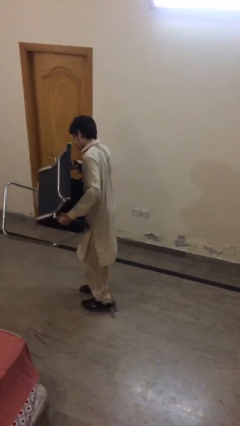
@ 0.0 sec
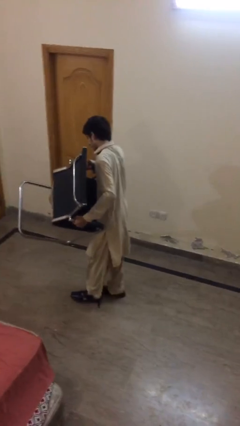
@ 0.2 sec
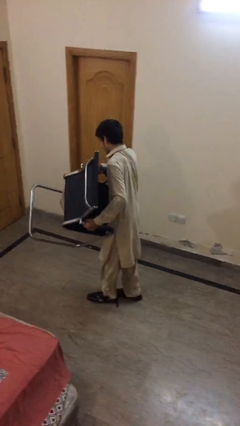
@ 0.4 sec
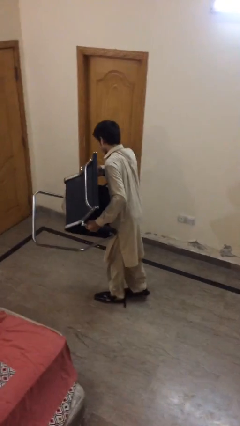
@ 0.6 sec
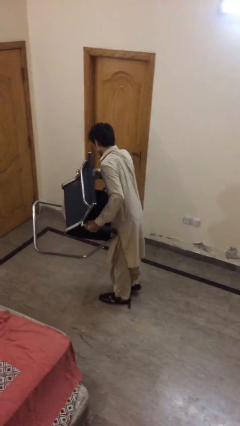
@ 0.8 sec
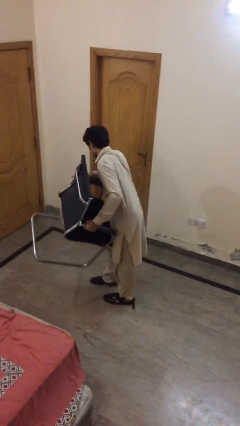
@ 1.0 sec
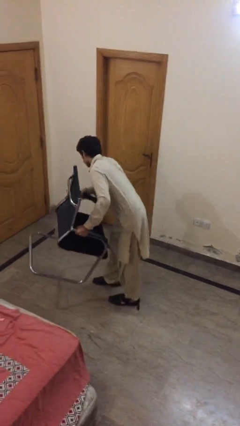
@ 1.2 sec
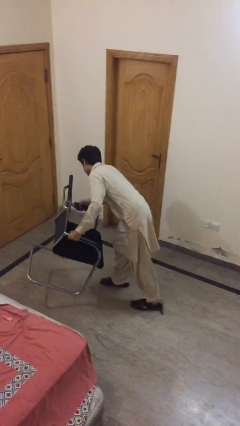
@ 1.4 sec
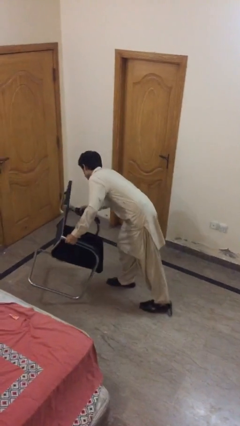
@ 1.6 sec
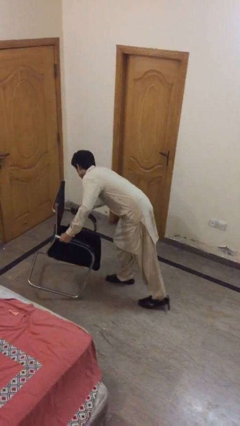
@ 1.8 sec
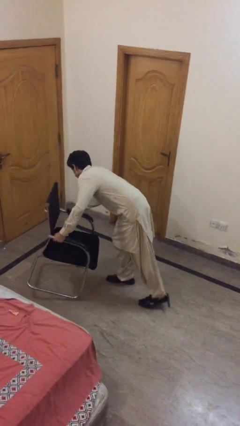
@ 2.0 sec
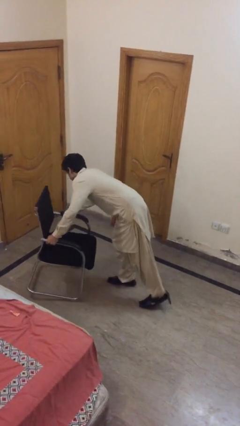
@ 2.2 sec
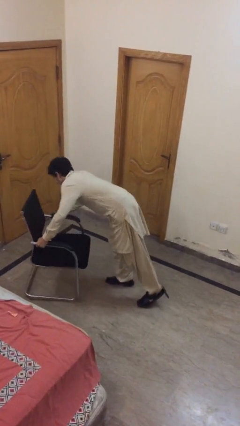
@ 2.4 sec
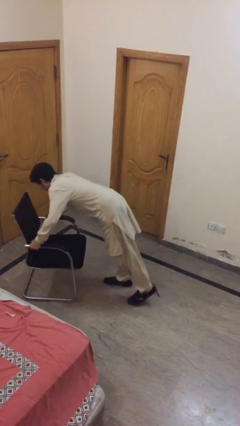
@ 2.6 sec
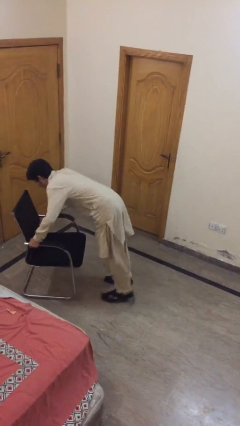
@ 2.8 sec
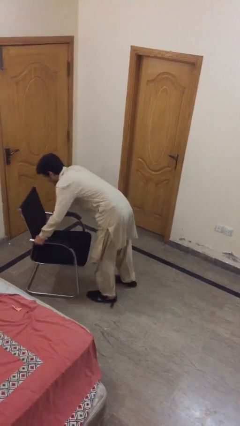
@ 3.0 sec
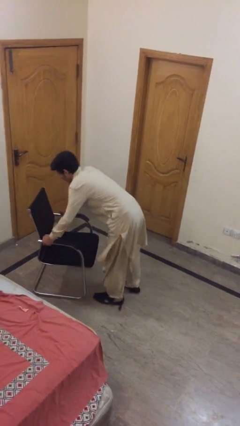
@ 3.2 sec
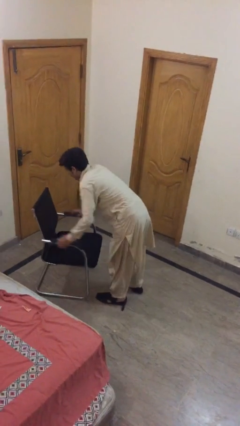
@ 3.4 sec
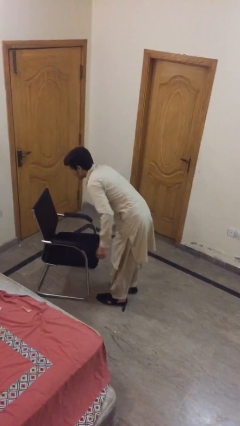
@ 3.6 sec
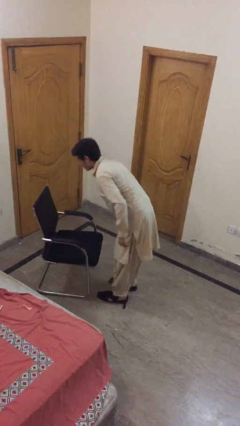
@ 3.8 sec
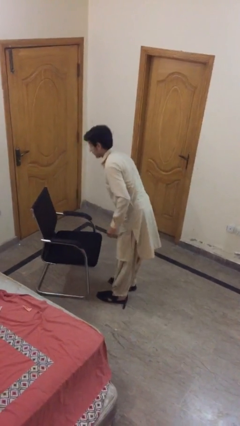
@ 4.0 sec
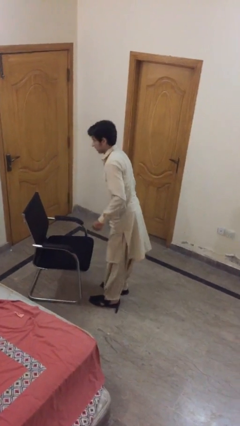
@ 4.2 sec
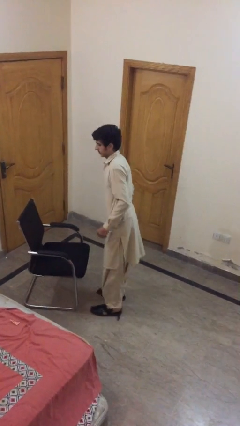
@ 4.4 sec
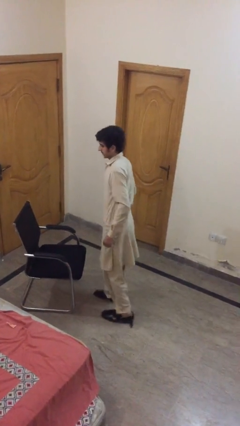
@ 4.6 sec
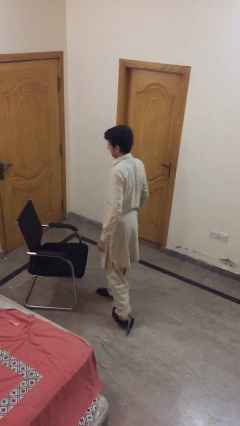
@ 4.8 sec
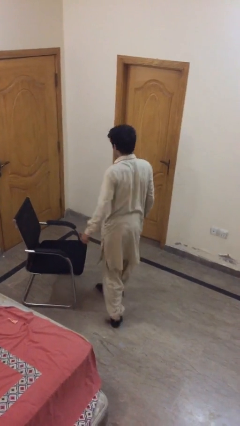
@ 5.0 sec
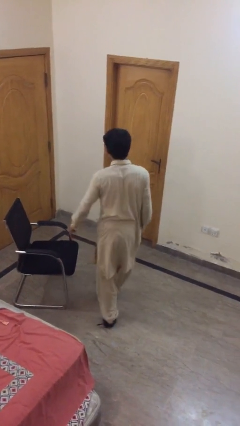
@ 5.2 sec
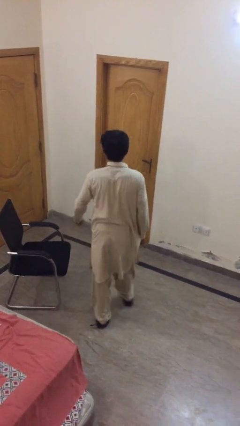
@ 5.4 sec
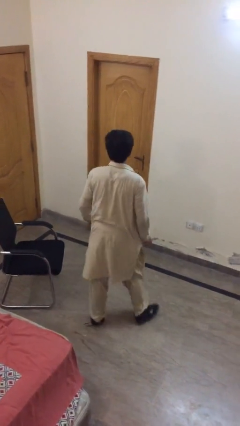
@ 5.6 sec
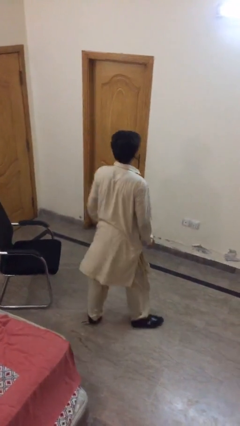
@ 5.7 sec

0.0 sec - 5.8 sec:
person puts down object on floor

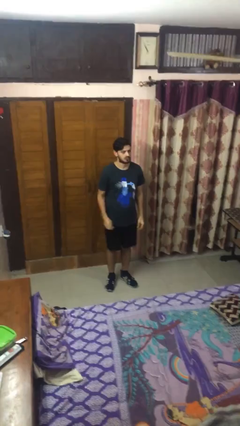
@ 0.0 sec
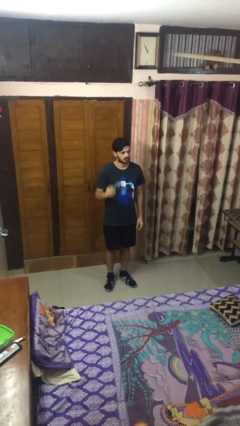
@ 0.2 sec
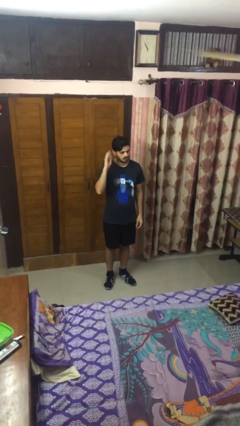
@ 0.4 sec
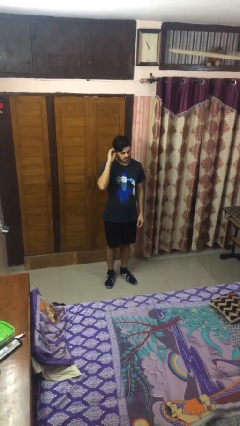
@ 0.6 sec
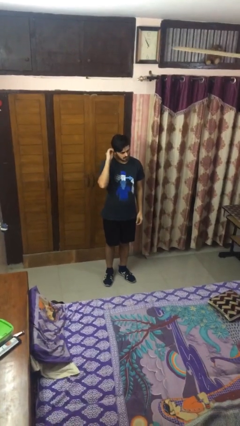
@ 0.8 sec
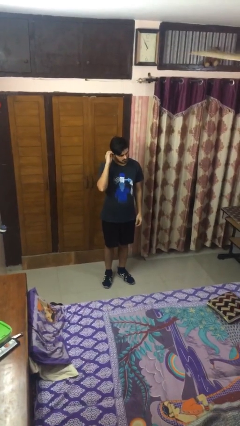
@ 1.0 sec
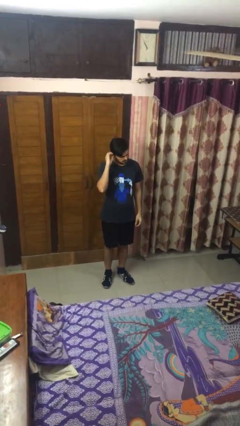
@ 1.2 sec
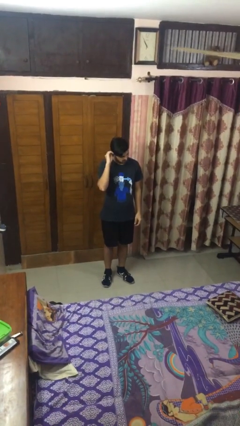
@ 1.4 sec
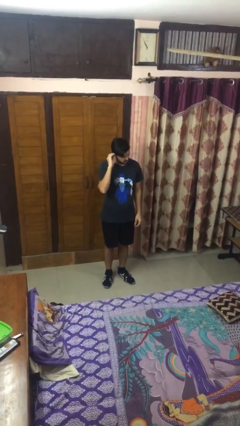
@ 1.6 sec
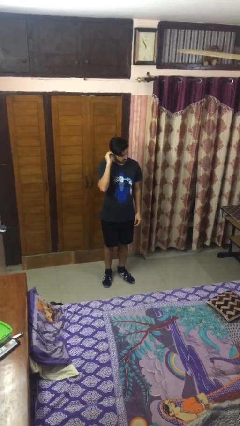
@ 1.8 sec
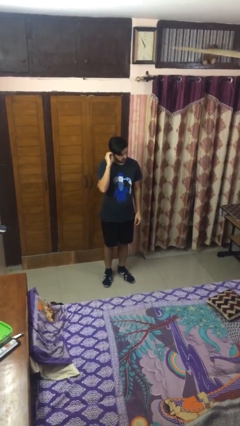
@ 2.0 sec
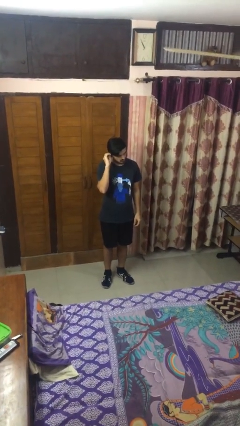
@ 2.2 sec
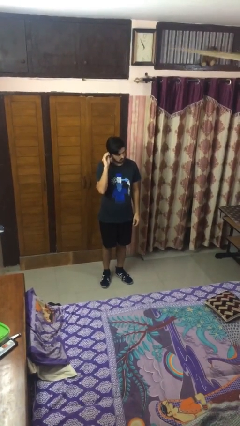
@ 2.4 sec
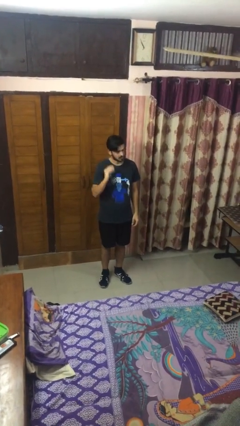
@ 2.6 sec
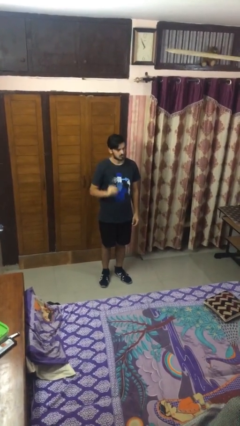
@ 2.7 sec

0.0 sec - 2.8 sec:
person touches earlobe

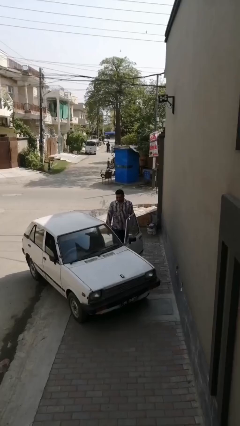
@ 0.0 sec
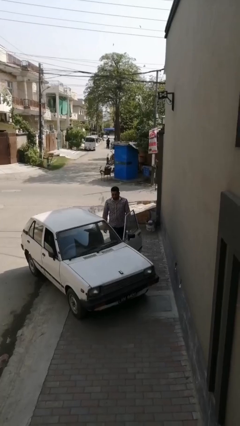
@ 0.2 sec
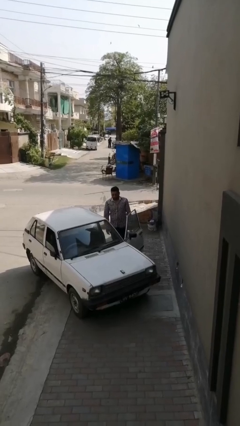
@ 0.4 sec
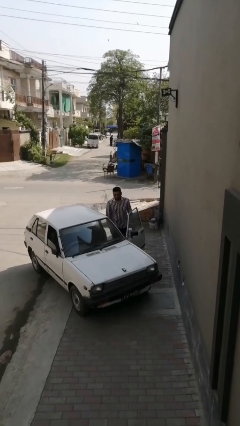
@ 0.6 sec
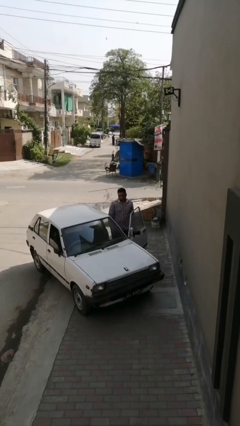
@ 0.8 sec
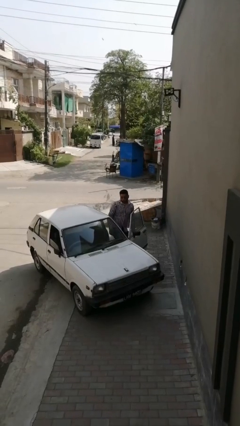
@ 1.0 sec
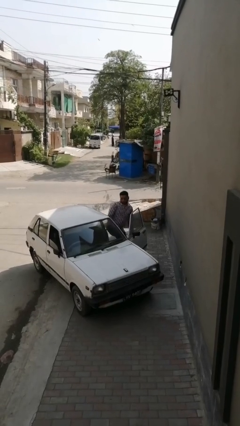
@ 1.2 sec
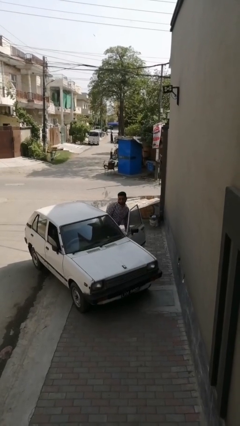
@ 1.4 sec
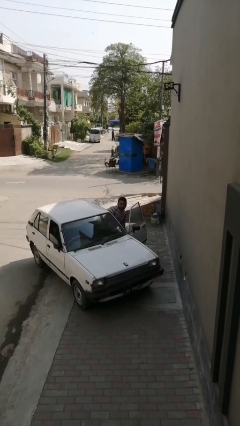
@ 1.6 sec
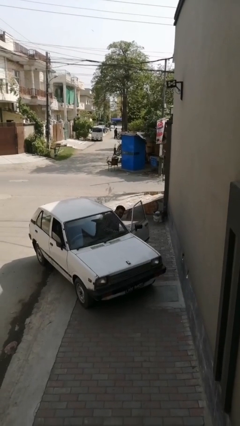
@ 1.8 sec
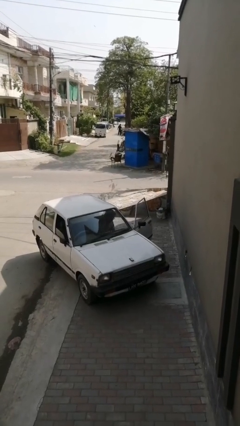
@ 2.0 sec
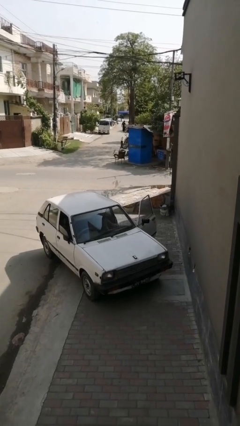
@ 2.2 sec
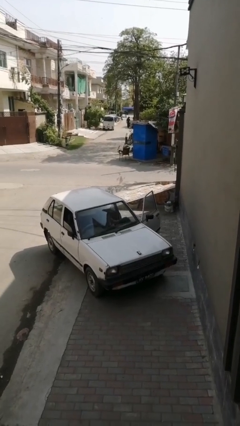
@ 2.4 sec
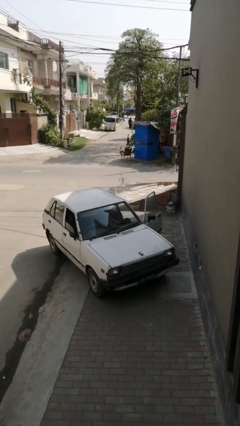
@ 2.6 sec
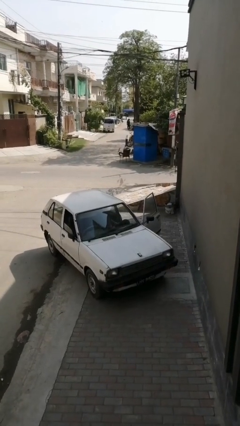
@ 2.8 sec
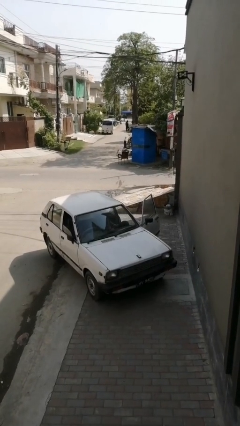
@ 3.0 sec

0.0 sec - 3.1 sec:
person enters car

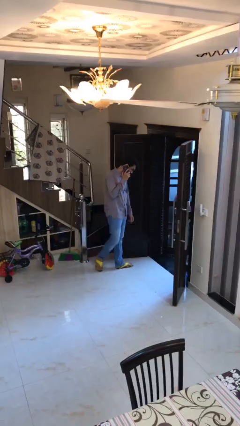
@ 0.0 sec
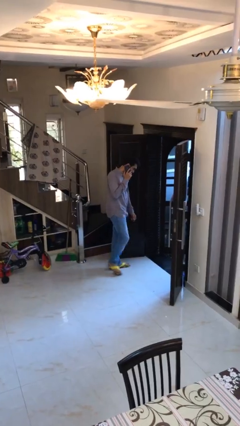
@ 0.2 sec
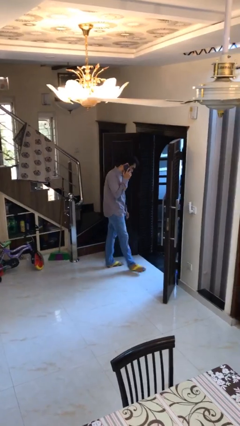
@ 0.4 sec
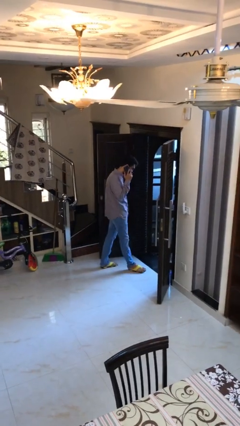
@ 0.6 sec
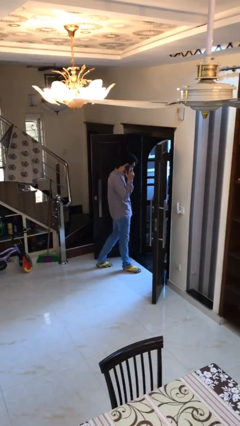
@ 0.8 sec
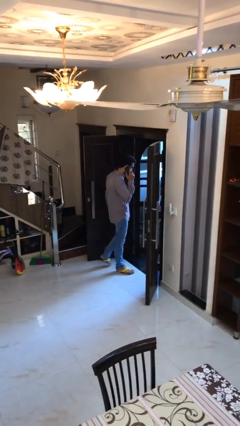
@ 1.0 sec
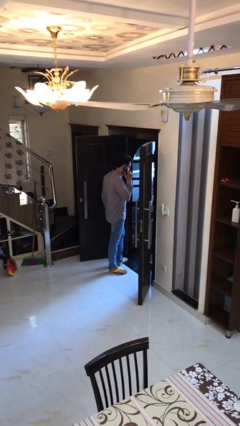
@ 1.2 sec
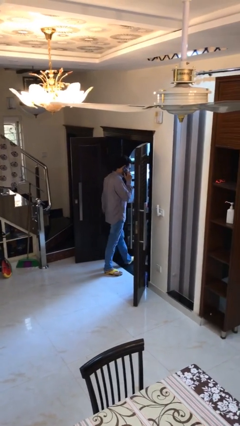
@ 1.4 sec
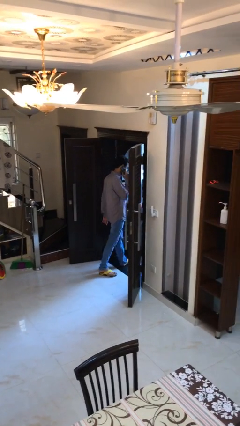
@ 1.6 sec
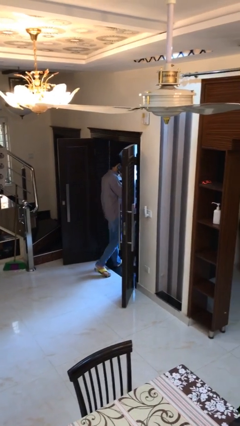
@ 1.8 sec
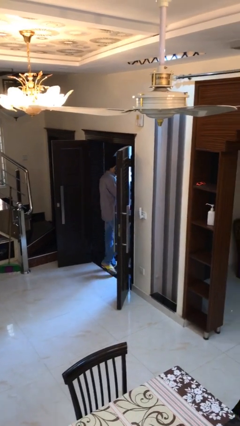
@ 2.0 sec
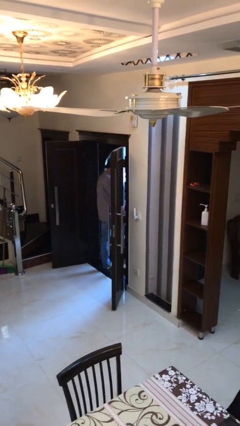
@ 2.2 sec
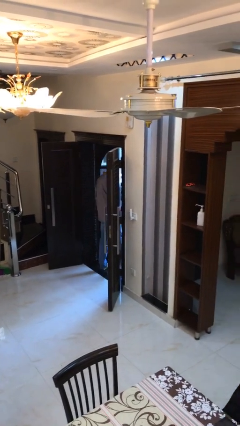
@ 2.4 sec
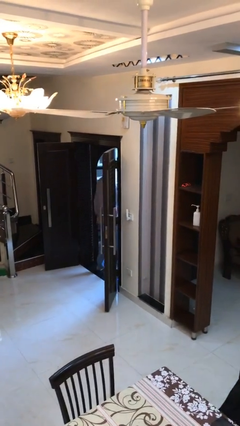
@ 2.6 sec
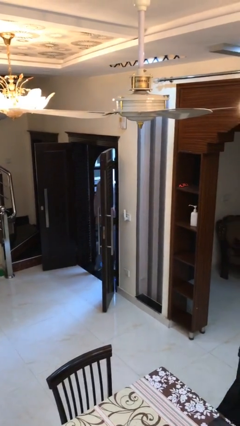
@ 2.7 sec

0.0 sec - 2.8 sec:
person exits scene through structure

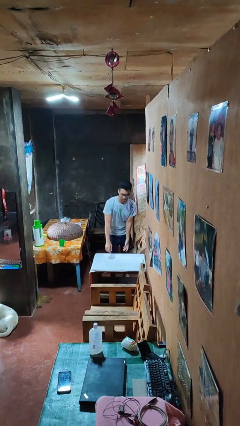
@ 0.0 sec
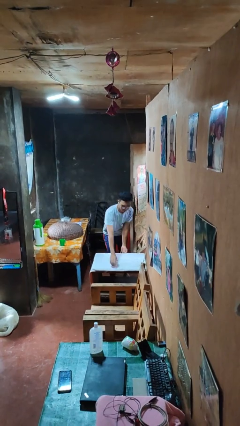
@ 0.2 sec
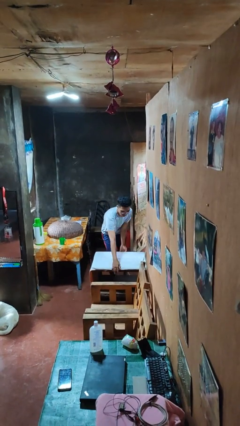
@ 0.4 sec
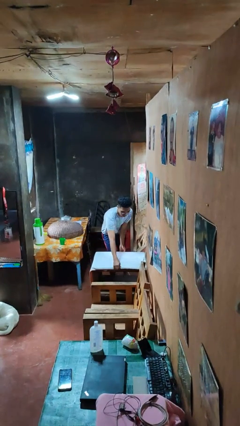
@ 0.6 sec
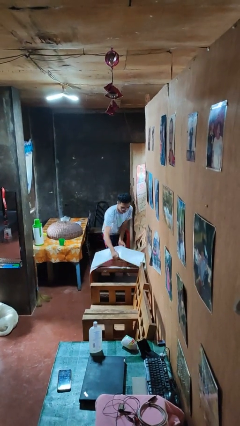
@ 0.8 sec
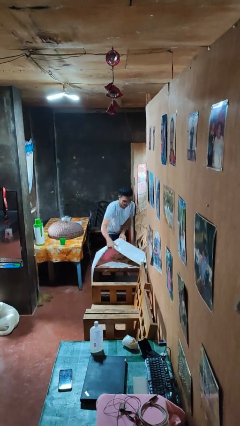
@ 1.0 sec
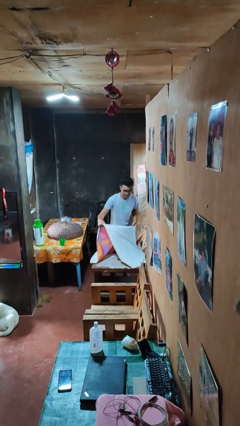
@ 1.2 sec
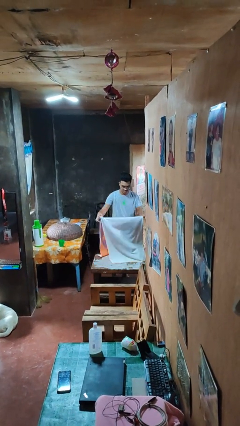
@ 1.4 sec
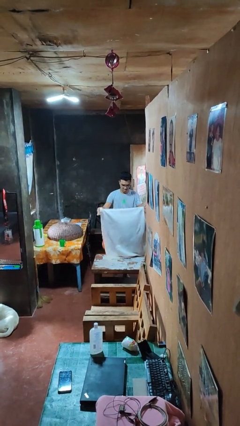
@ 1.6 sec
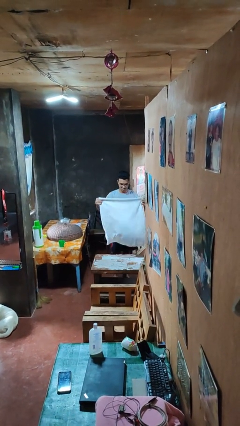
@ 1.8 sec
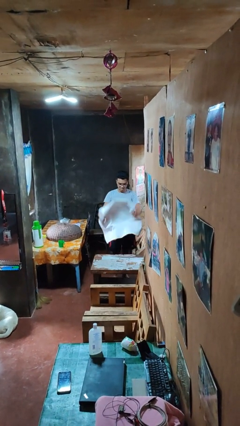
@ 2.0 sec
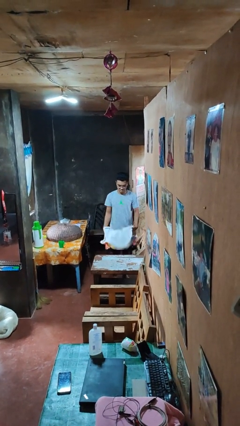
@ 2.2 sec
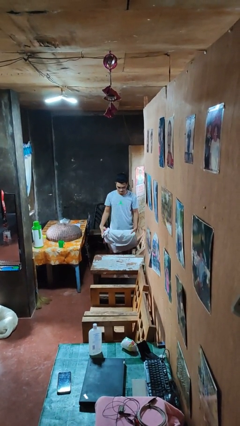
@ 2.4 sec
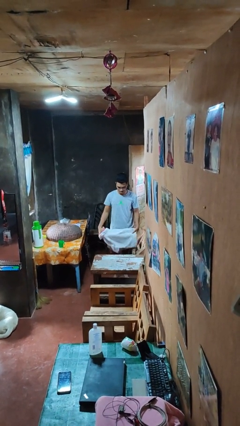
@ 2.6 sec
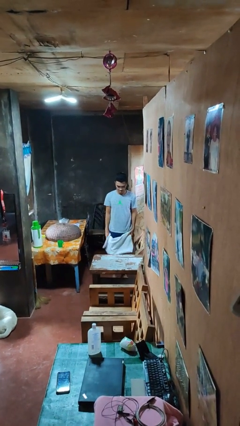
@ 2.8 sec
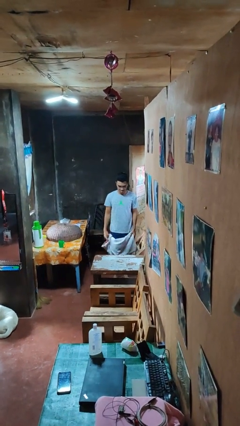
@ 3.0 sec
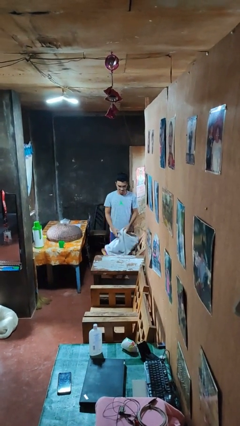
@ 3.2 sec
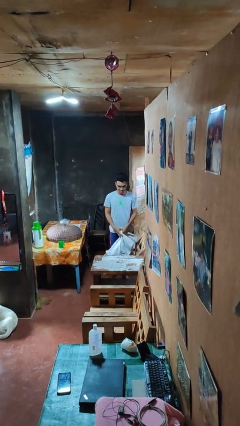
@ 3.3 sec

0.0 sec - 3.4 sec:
person folds tablecloth
